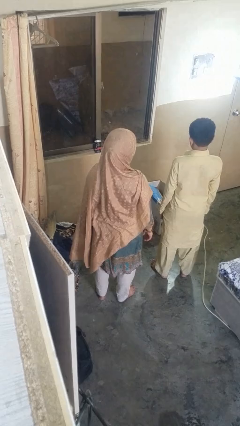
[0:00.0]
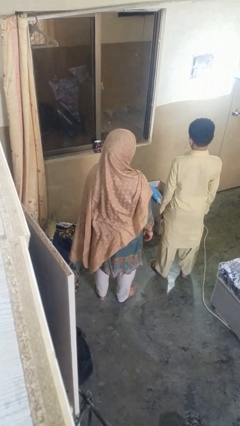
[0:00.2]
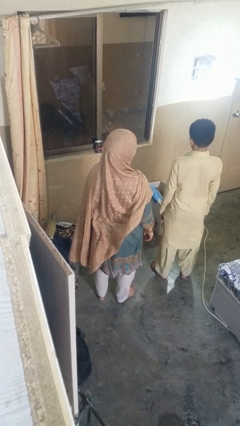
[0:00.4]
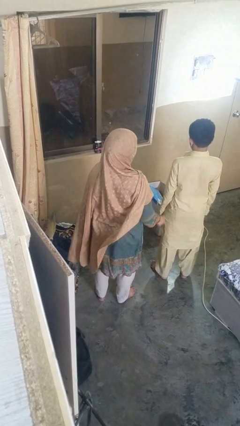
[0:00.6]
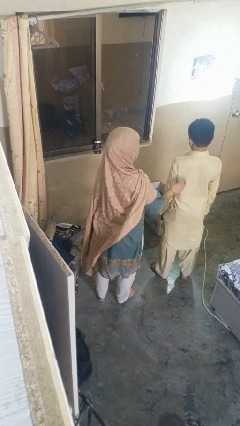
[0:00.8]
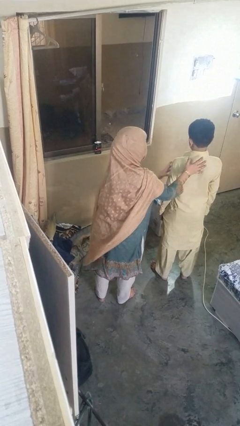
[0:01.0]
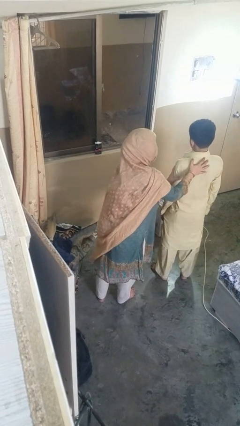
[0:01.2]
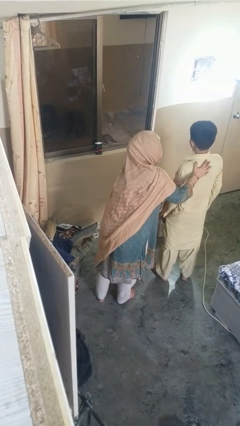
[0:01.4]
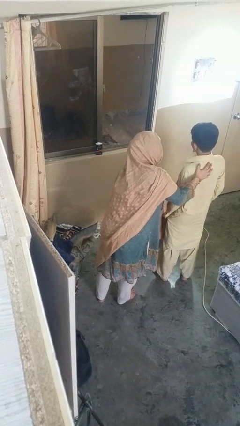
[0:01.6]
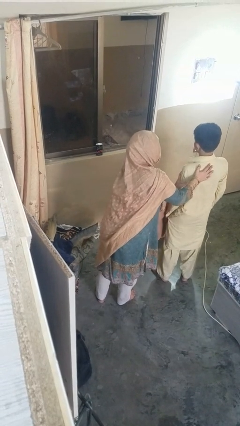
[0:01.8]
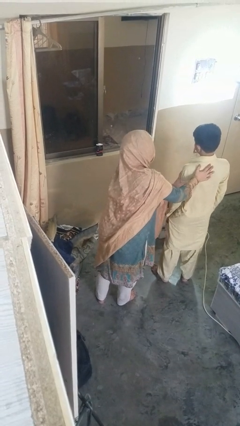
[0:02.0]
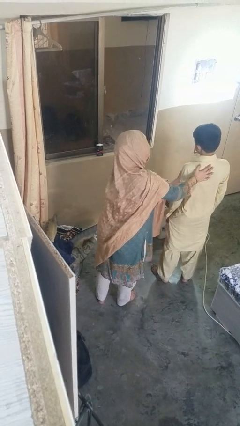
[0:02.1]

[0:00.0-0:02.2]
person laughs with person

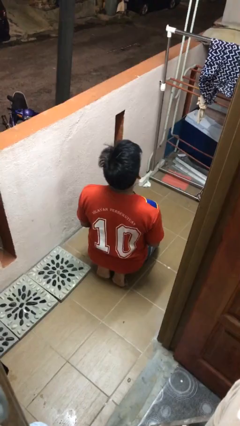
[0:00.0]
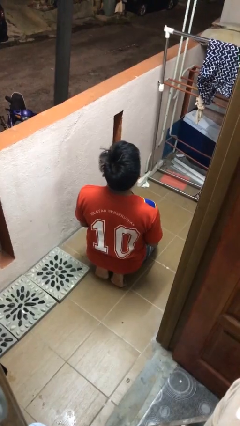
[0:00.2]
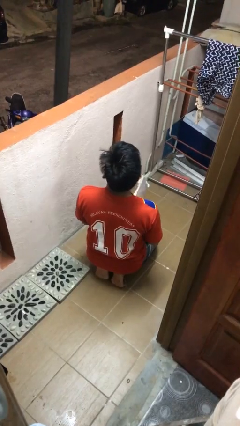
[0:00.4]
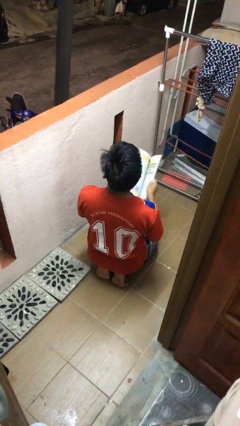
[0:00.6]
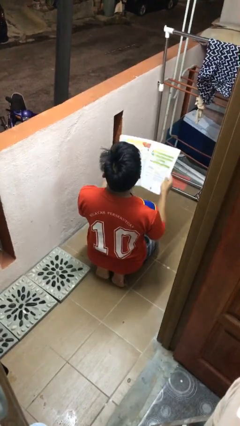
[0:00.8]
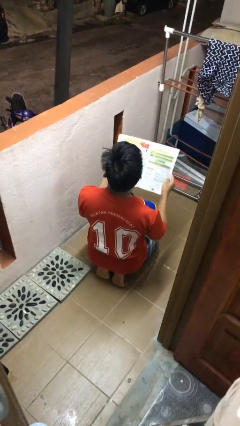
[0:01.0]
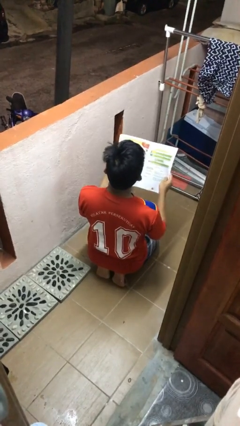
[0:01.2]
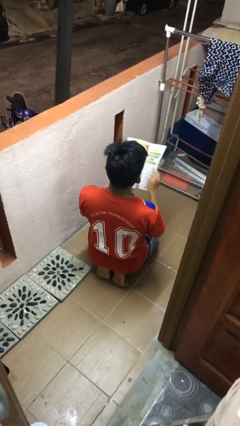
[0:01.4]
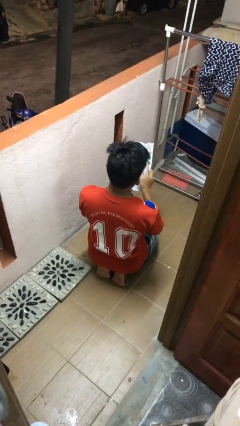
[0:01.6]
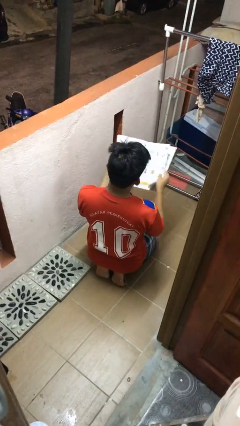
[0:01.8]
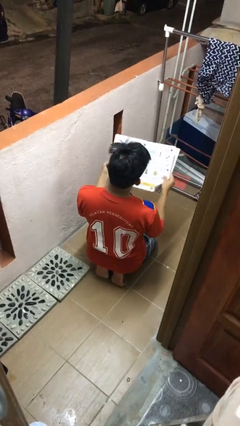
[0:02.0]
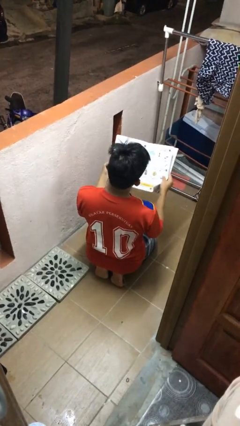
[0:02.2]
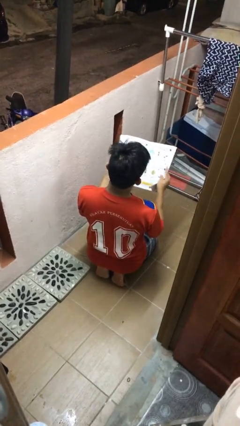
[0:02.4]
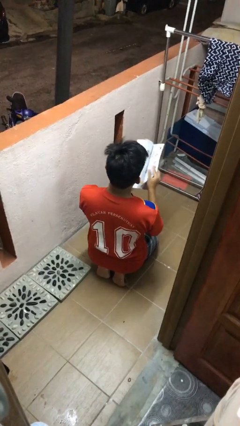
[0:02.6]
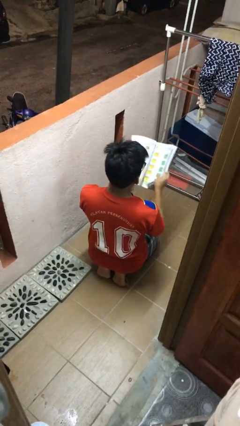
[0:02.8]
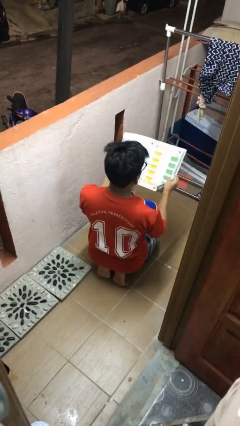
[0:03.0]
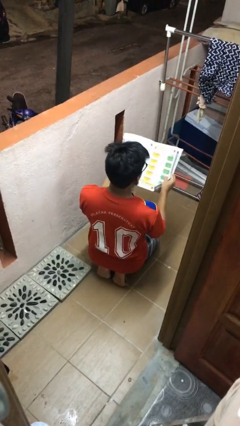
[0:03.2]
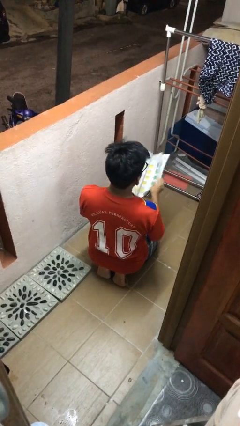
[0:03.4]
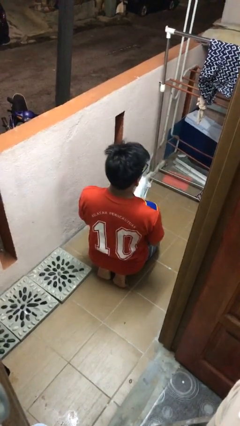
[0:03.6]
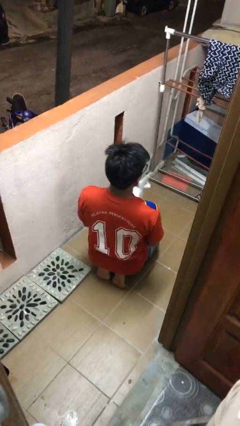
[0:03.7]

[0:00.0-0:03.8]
person reads magazine

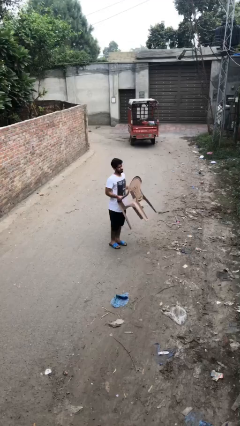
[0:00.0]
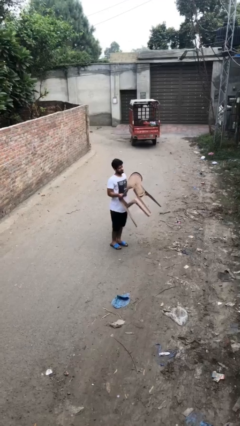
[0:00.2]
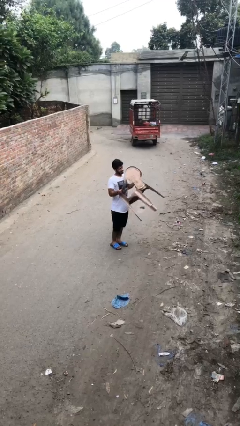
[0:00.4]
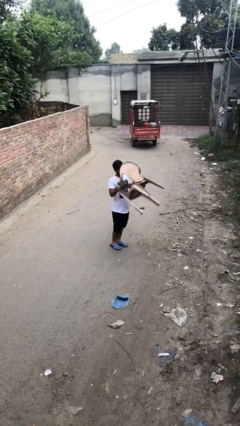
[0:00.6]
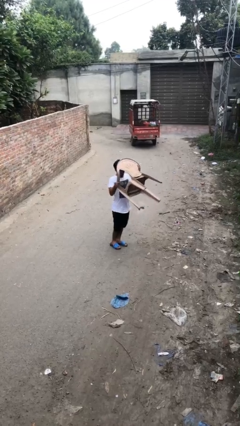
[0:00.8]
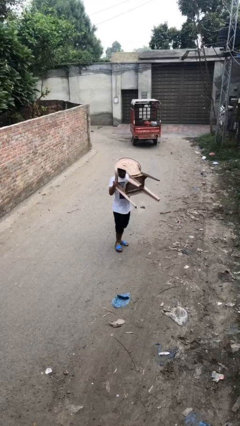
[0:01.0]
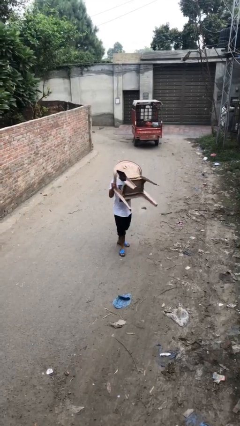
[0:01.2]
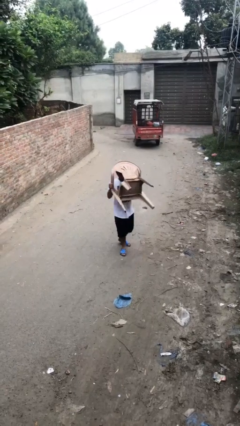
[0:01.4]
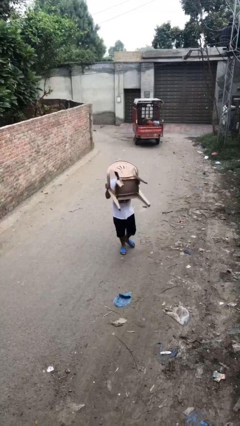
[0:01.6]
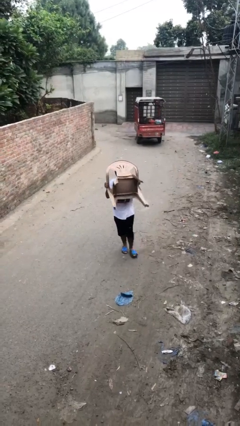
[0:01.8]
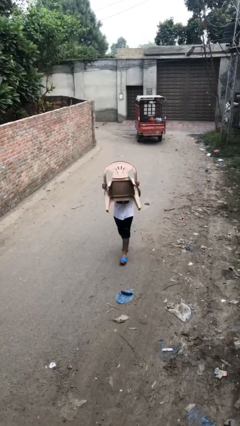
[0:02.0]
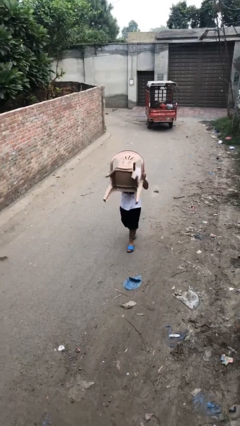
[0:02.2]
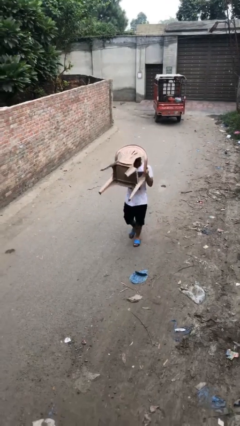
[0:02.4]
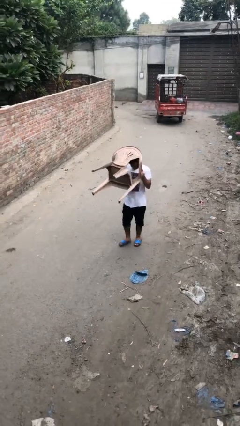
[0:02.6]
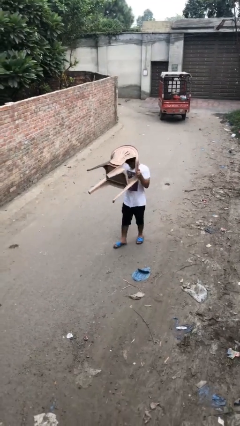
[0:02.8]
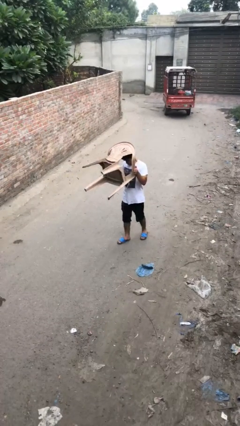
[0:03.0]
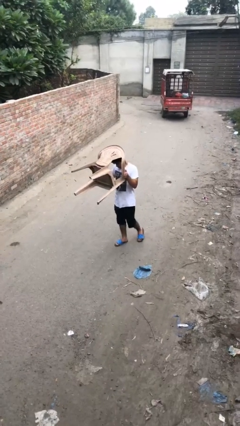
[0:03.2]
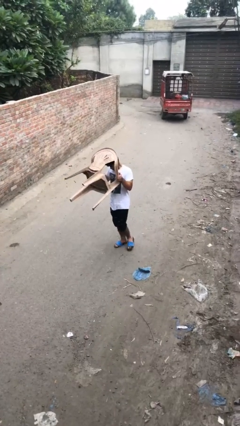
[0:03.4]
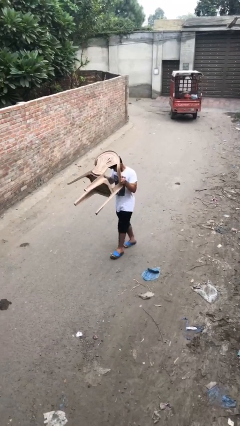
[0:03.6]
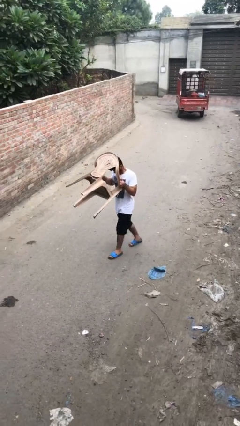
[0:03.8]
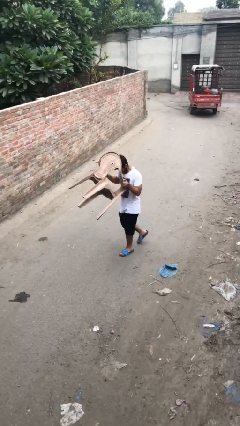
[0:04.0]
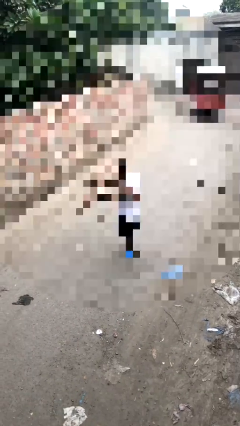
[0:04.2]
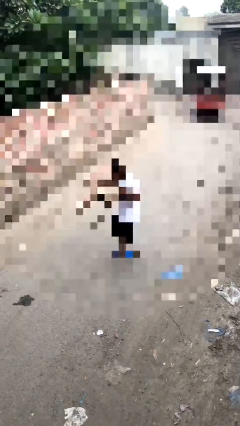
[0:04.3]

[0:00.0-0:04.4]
person carries heavy object

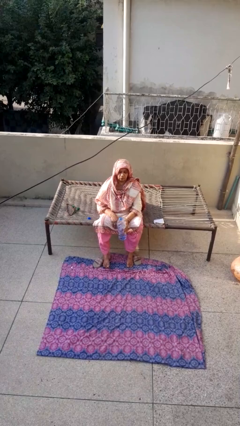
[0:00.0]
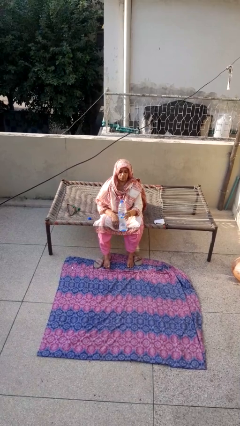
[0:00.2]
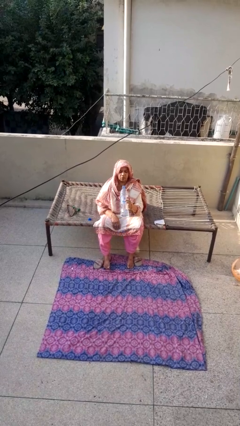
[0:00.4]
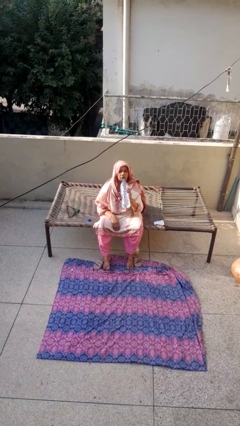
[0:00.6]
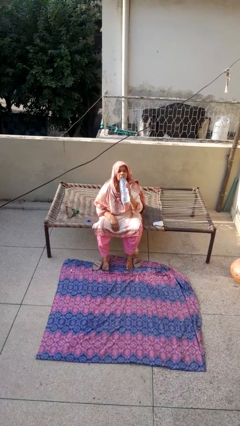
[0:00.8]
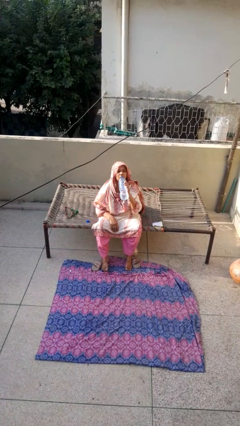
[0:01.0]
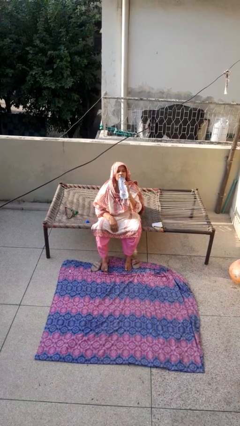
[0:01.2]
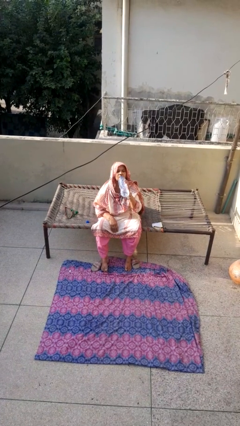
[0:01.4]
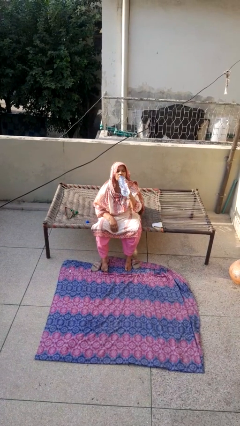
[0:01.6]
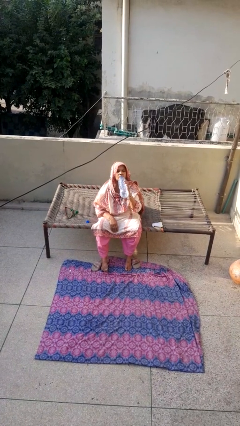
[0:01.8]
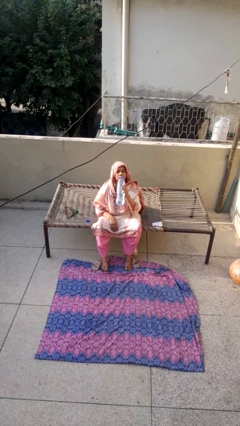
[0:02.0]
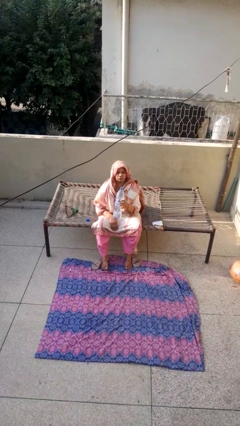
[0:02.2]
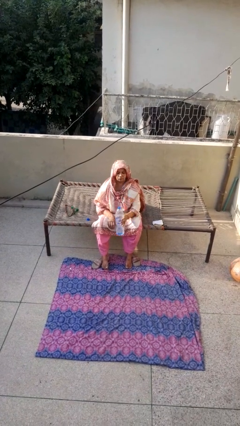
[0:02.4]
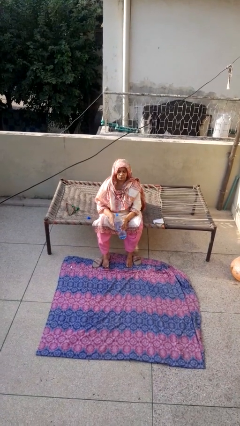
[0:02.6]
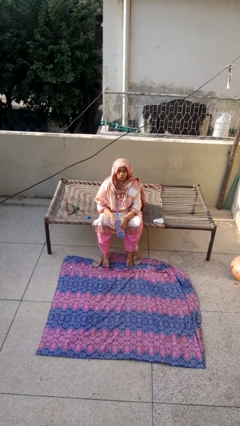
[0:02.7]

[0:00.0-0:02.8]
person drinks from bottle

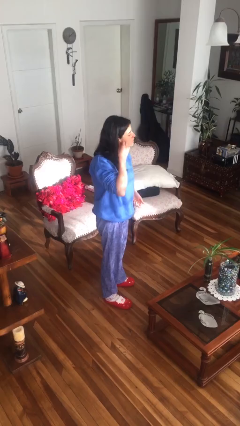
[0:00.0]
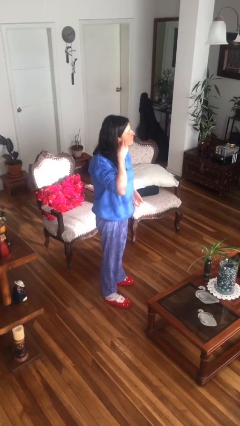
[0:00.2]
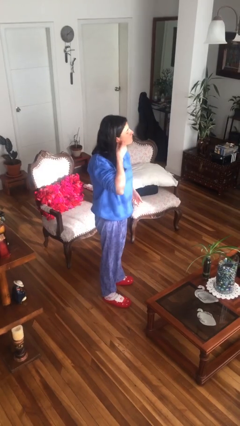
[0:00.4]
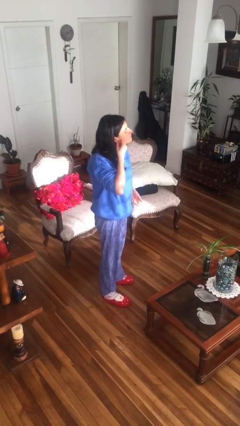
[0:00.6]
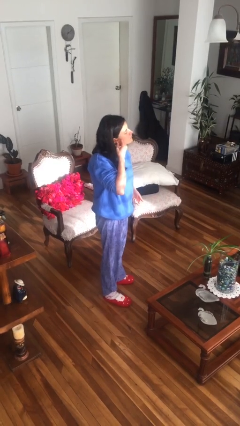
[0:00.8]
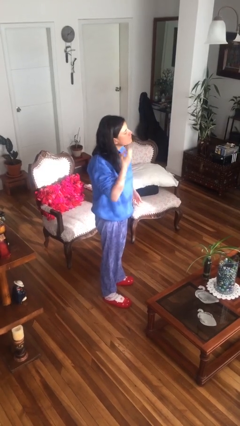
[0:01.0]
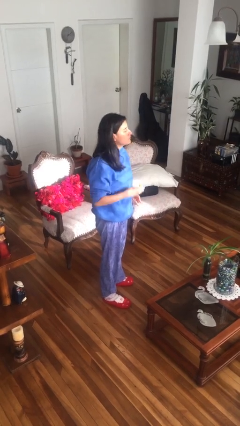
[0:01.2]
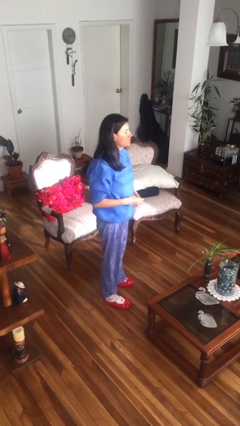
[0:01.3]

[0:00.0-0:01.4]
person takes off earrings

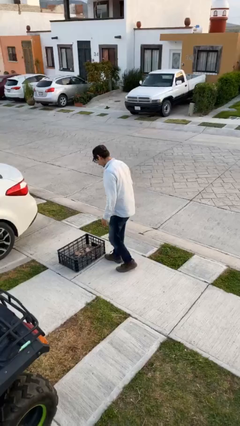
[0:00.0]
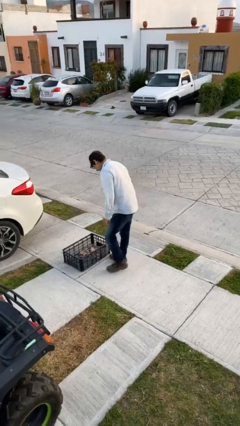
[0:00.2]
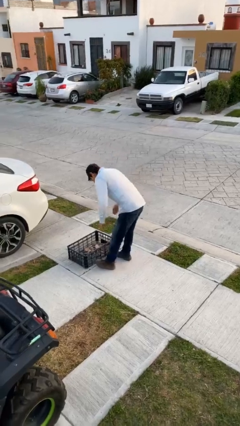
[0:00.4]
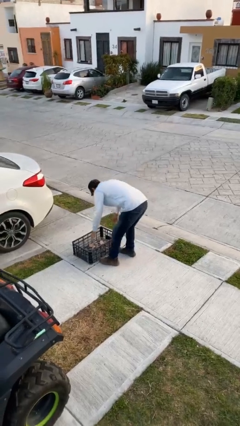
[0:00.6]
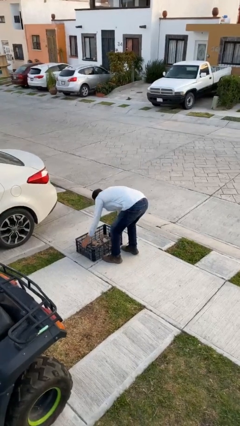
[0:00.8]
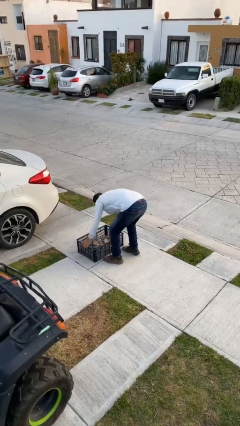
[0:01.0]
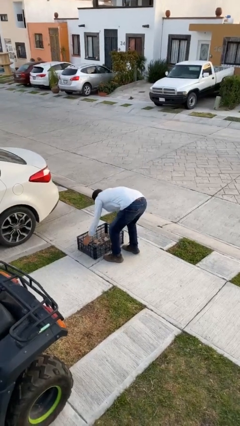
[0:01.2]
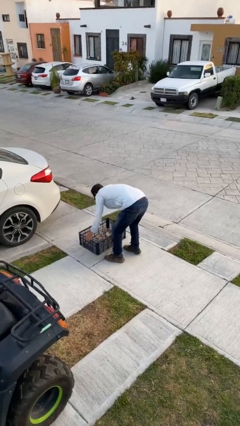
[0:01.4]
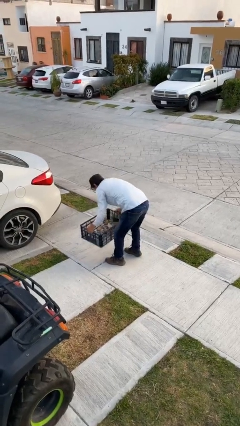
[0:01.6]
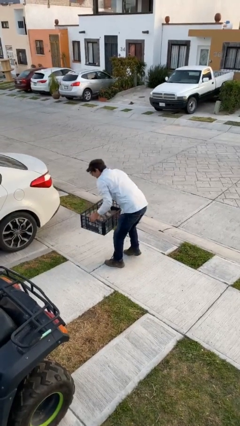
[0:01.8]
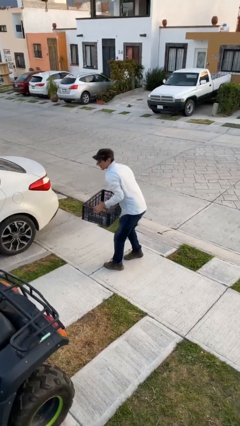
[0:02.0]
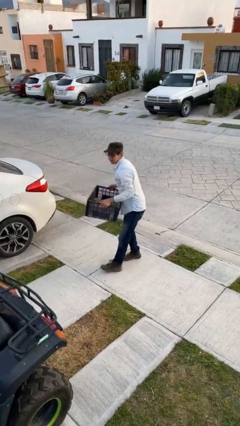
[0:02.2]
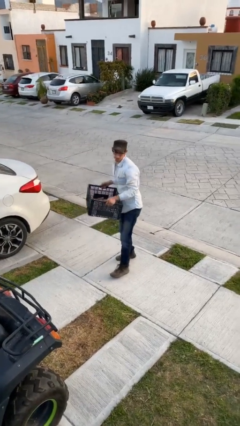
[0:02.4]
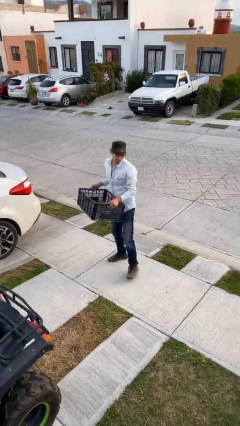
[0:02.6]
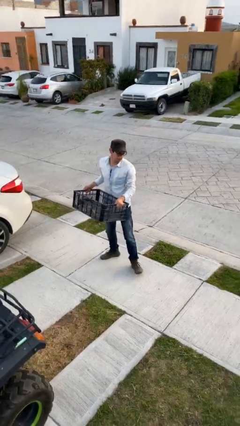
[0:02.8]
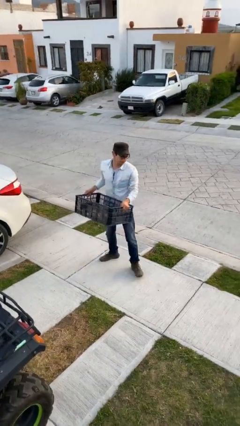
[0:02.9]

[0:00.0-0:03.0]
person picks up object from floor

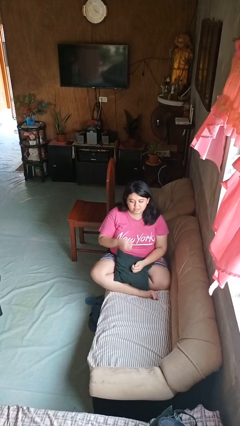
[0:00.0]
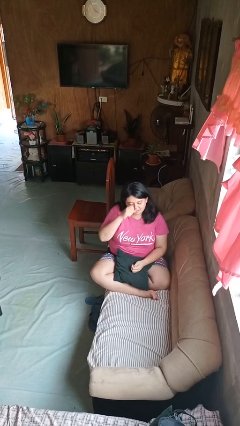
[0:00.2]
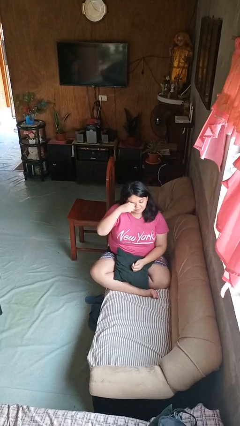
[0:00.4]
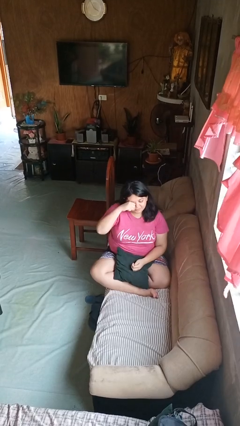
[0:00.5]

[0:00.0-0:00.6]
person rubs eyes
